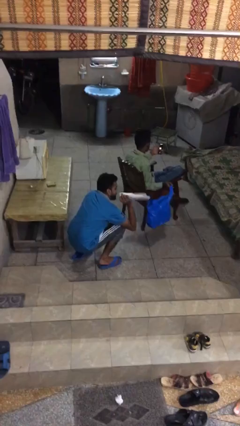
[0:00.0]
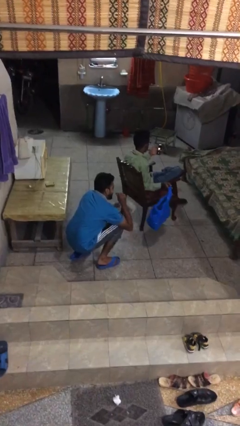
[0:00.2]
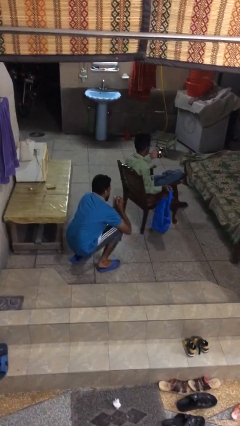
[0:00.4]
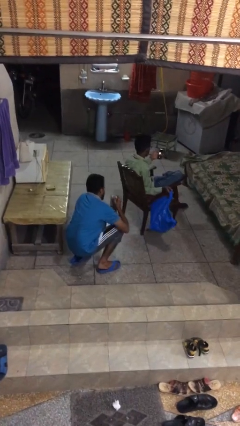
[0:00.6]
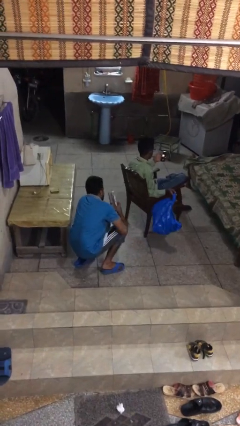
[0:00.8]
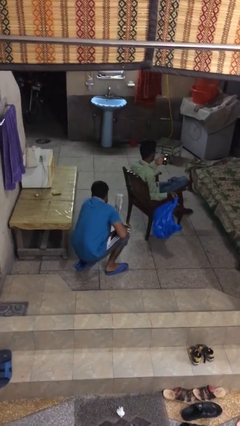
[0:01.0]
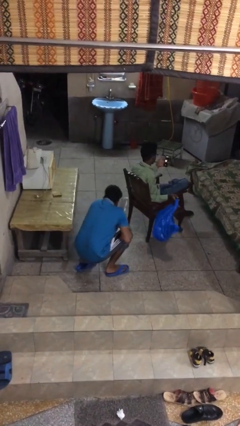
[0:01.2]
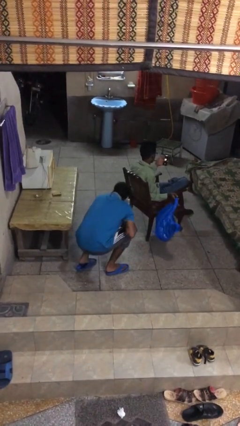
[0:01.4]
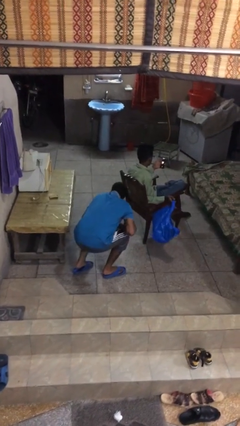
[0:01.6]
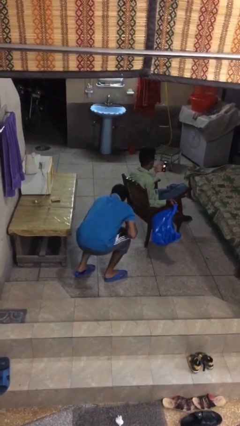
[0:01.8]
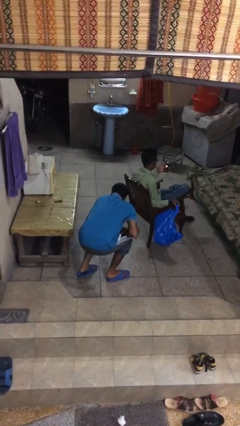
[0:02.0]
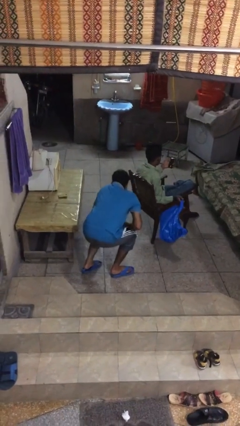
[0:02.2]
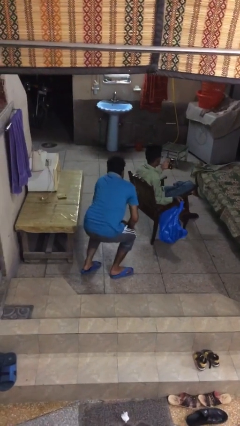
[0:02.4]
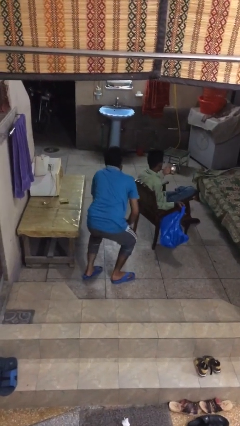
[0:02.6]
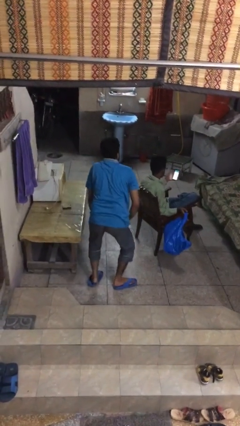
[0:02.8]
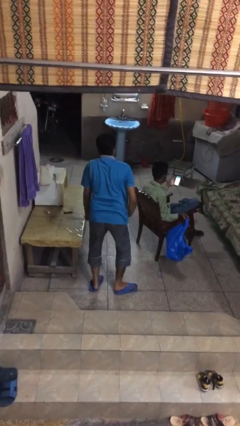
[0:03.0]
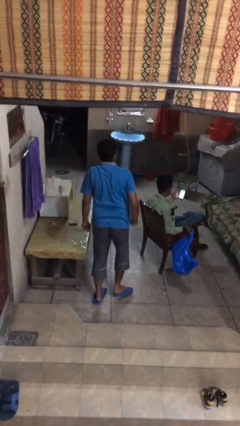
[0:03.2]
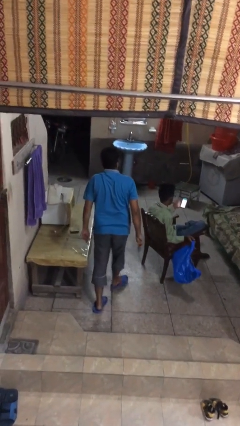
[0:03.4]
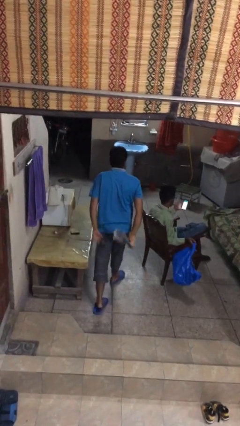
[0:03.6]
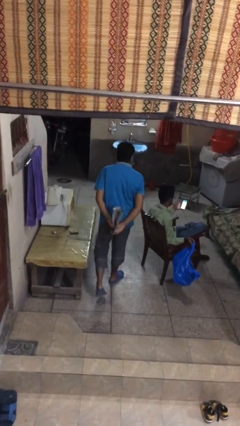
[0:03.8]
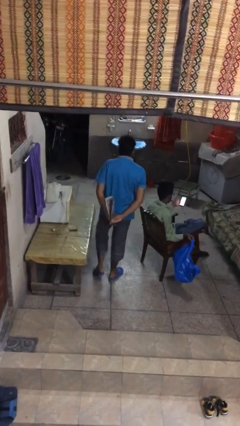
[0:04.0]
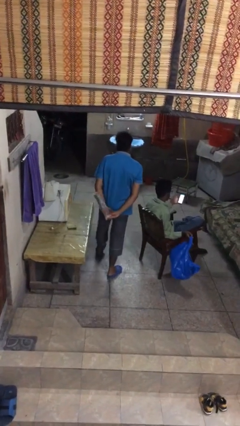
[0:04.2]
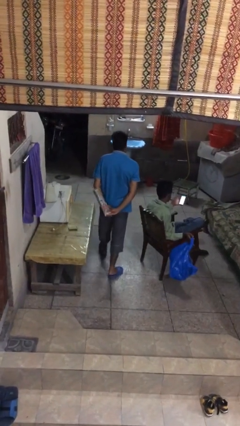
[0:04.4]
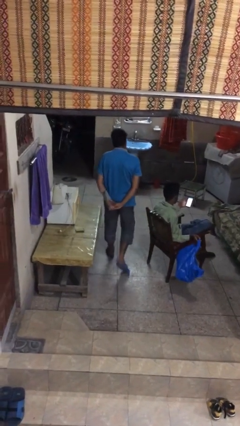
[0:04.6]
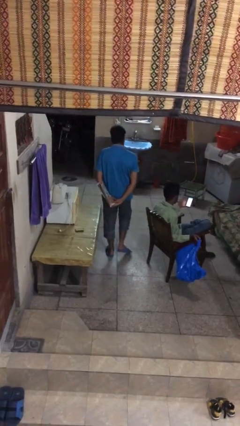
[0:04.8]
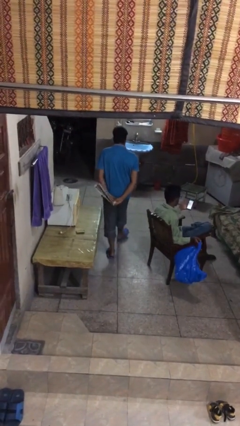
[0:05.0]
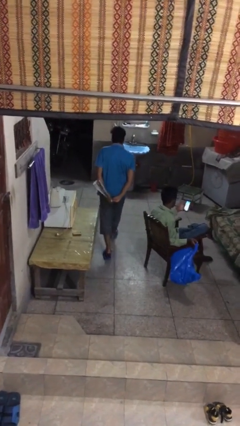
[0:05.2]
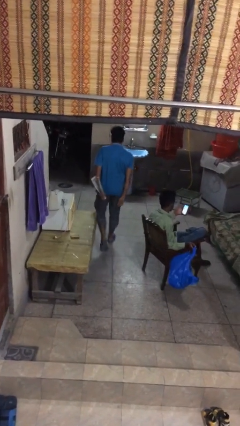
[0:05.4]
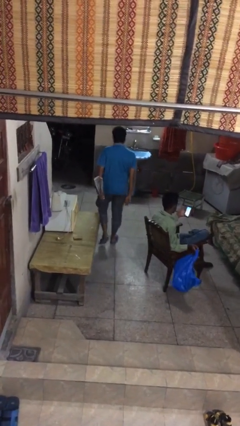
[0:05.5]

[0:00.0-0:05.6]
person steals object from person

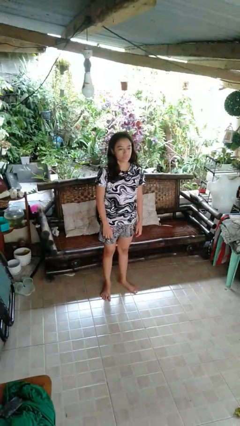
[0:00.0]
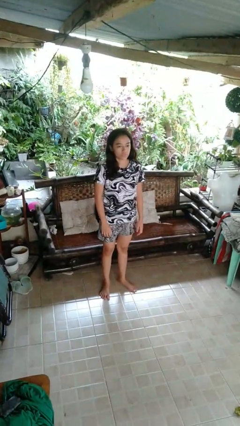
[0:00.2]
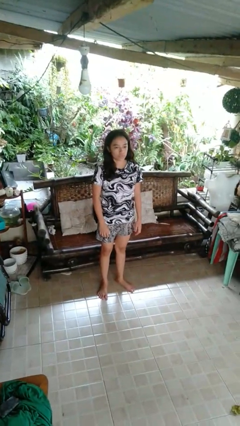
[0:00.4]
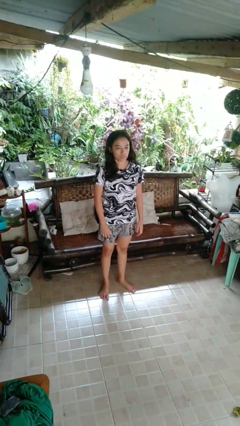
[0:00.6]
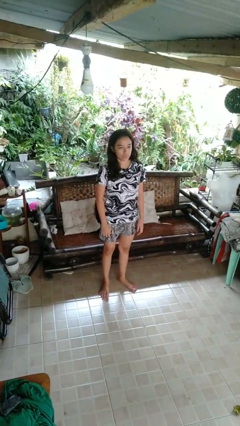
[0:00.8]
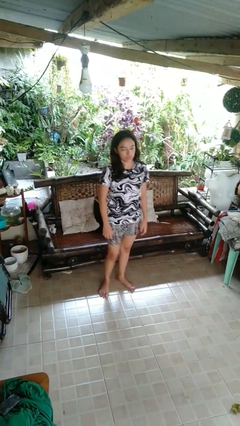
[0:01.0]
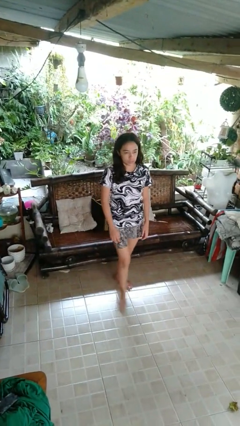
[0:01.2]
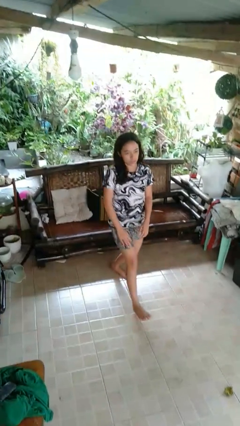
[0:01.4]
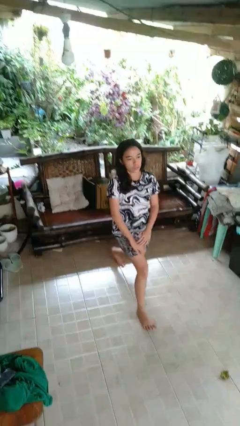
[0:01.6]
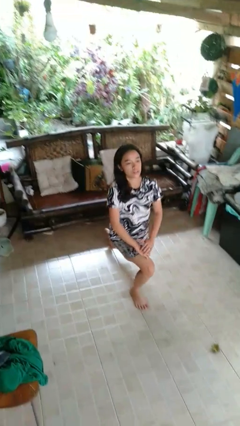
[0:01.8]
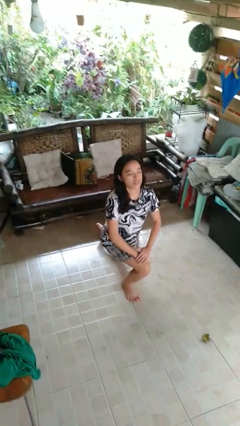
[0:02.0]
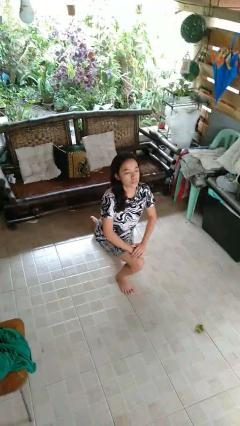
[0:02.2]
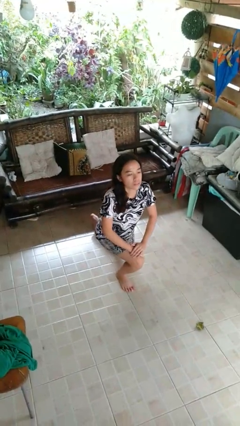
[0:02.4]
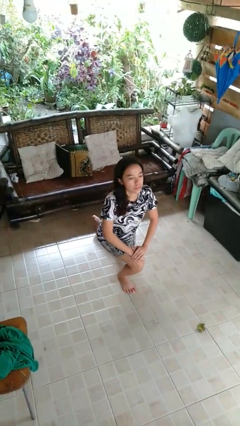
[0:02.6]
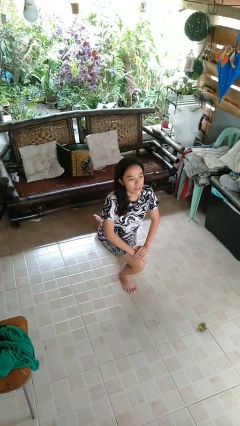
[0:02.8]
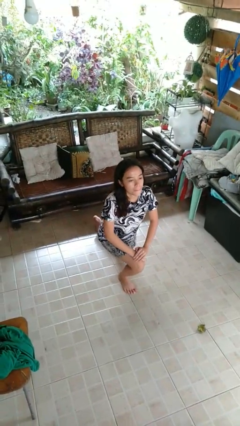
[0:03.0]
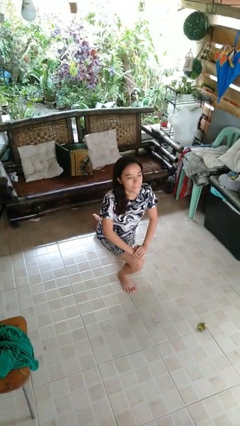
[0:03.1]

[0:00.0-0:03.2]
person exercises with lunges

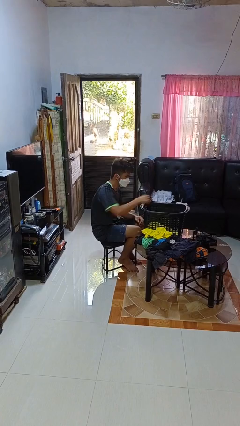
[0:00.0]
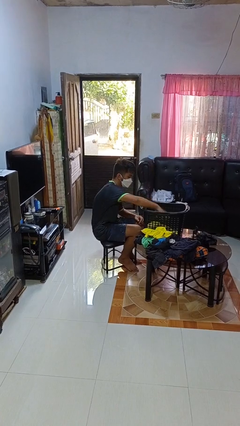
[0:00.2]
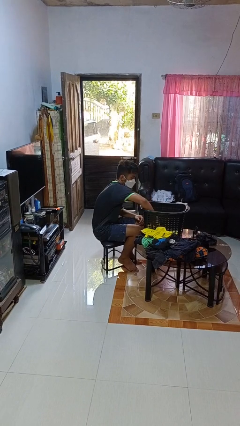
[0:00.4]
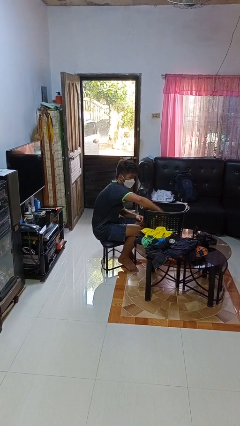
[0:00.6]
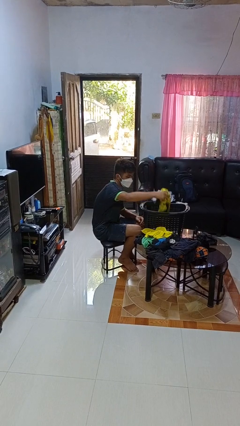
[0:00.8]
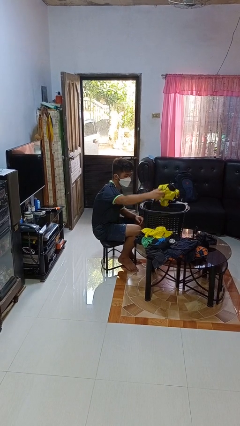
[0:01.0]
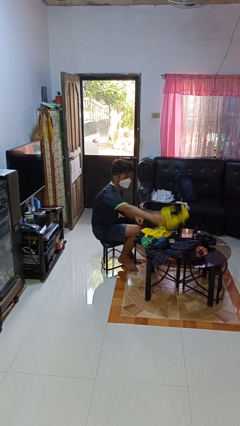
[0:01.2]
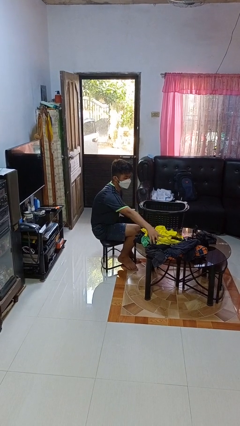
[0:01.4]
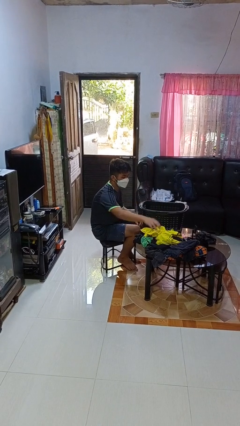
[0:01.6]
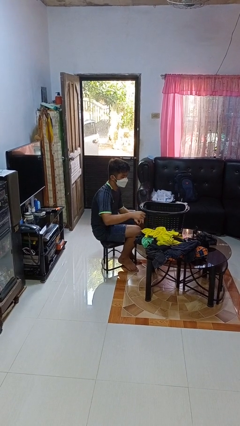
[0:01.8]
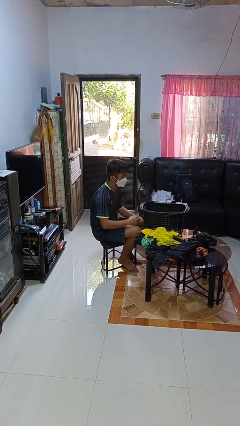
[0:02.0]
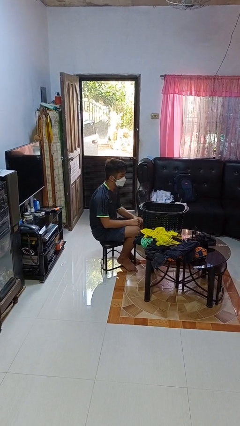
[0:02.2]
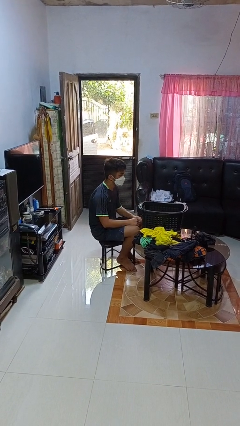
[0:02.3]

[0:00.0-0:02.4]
person takes object from basket

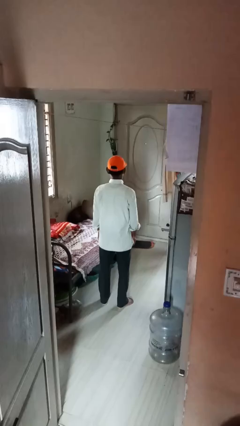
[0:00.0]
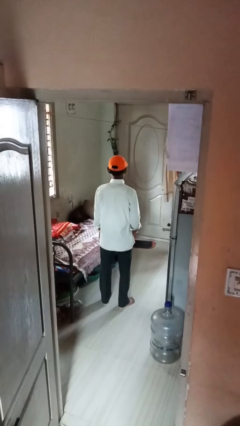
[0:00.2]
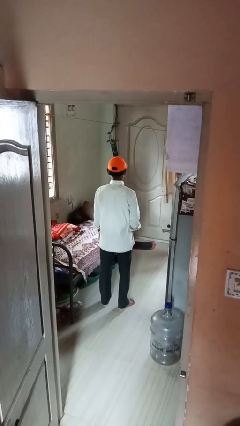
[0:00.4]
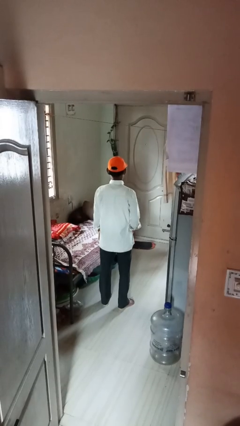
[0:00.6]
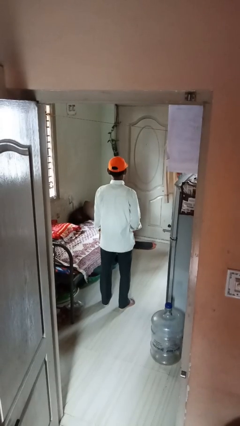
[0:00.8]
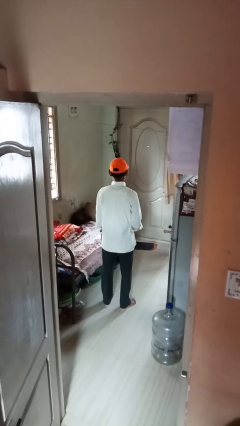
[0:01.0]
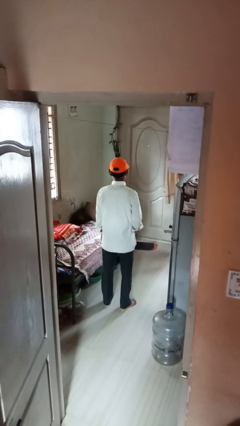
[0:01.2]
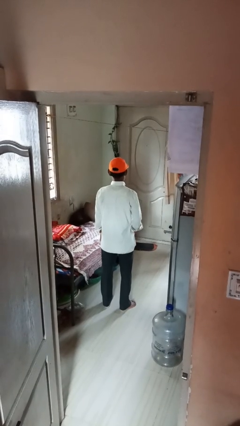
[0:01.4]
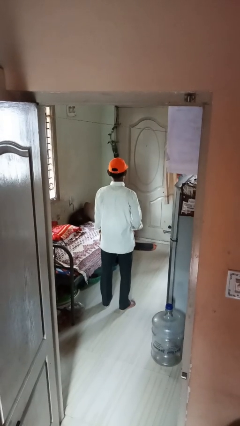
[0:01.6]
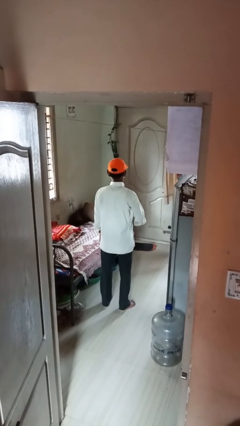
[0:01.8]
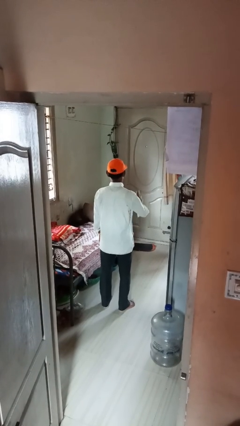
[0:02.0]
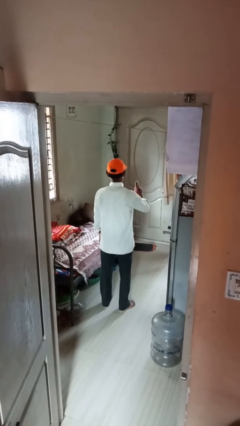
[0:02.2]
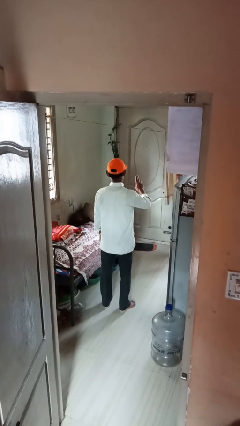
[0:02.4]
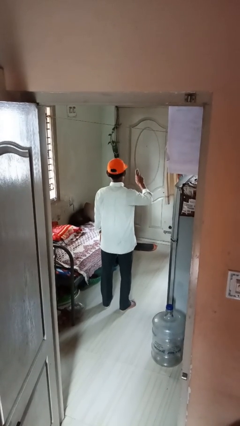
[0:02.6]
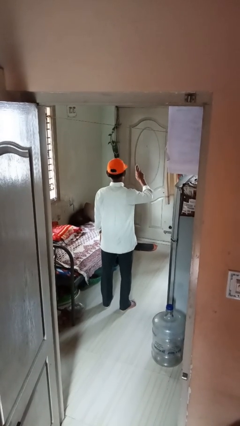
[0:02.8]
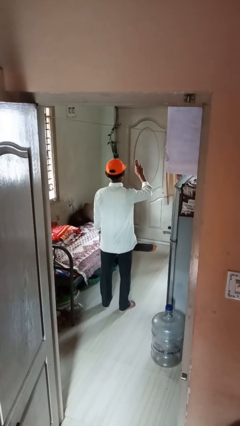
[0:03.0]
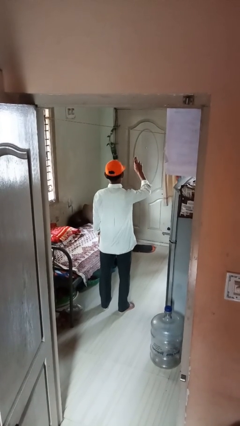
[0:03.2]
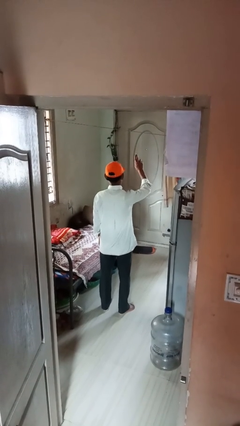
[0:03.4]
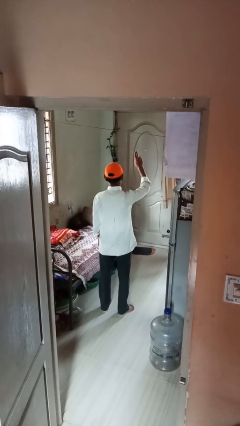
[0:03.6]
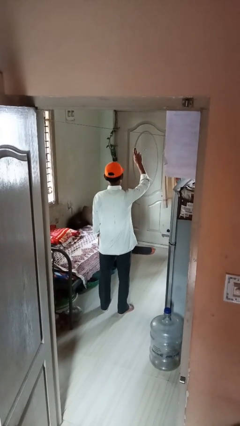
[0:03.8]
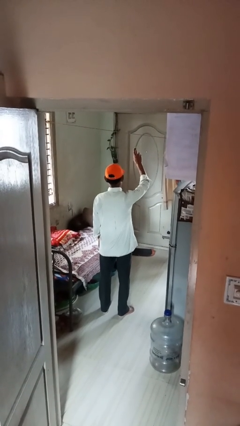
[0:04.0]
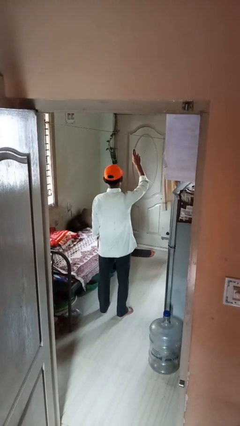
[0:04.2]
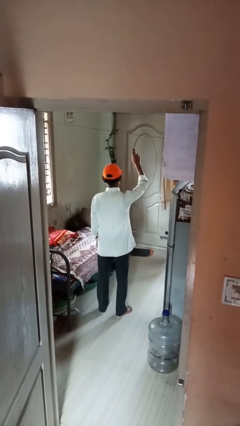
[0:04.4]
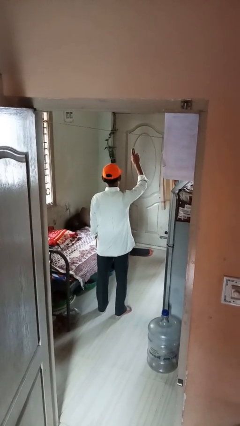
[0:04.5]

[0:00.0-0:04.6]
person gestures swipe up

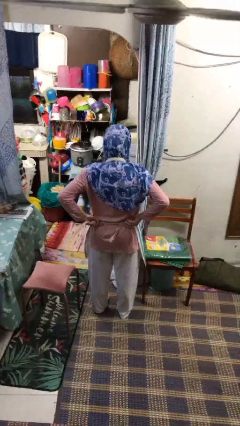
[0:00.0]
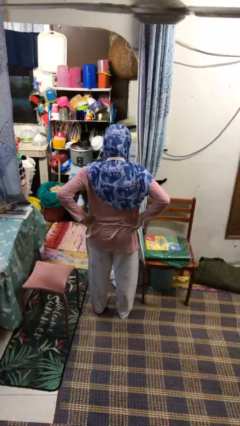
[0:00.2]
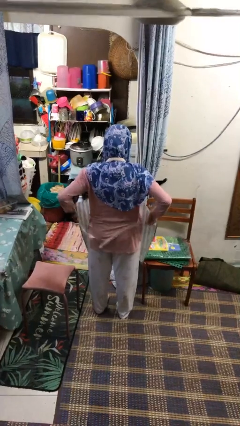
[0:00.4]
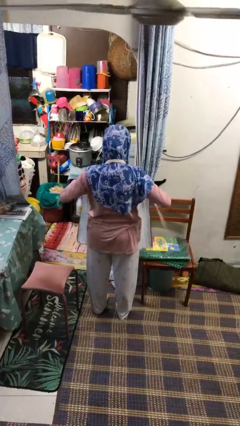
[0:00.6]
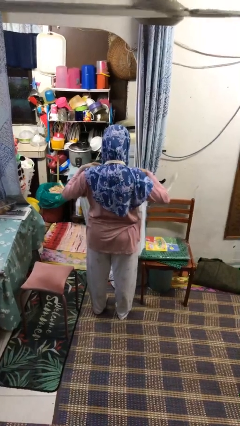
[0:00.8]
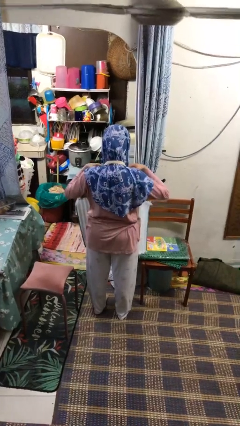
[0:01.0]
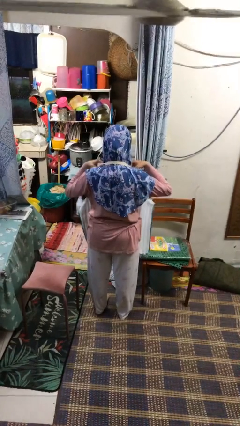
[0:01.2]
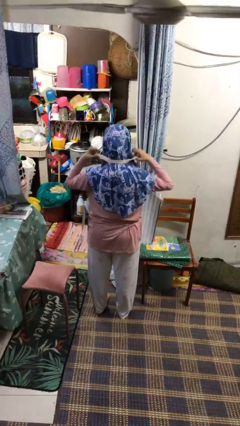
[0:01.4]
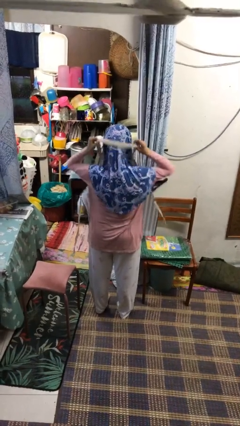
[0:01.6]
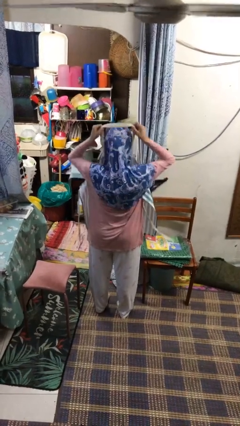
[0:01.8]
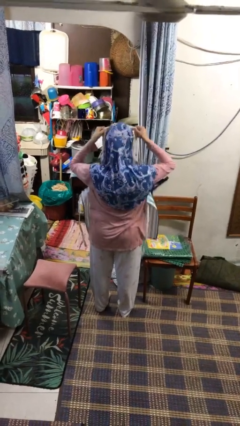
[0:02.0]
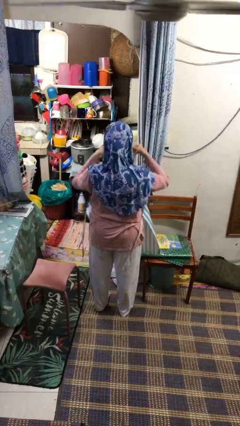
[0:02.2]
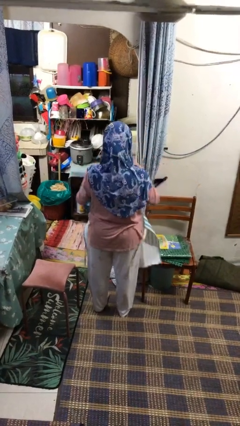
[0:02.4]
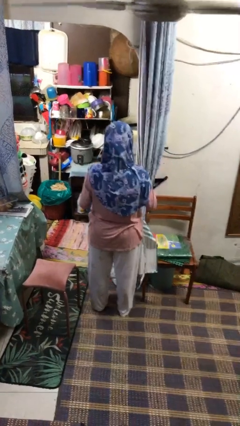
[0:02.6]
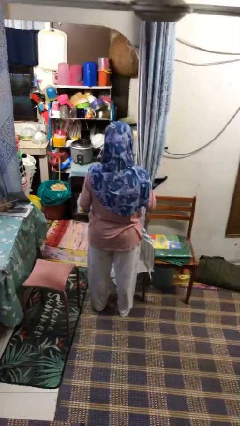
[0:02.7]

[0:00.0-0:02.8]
person takes off apron
